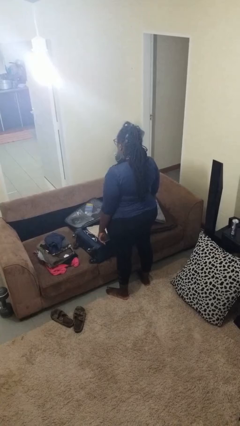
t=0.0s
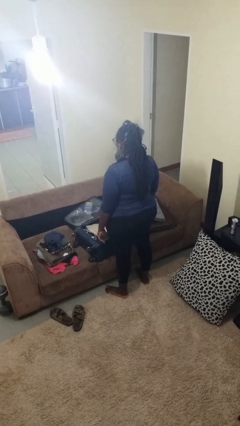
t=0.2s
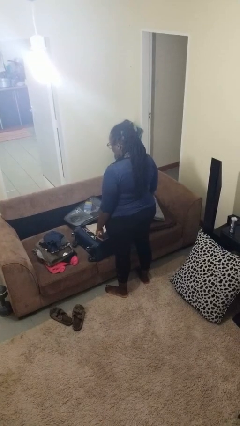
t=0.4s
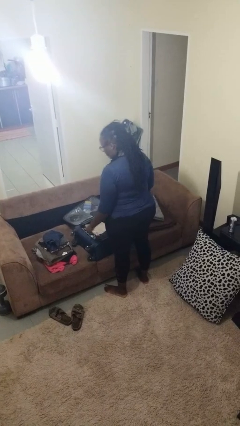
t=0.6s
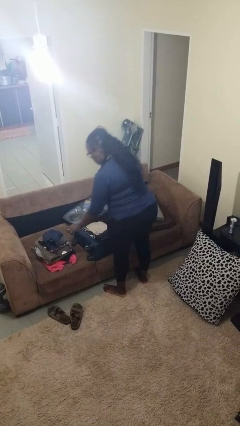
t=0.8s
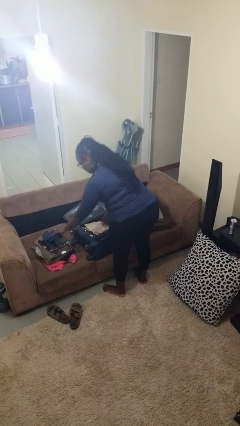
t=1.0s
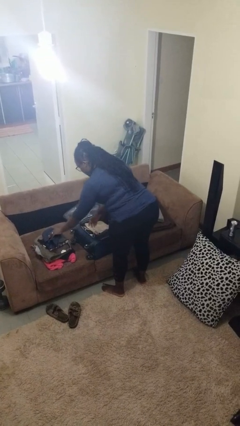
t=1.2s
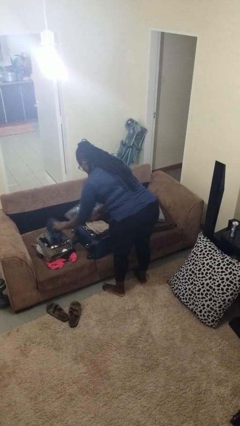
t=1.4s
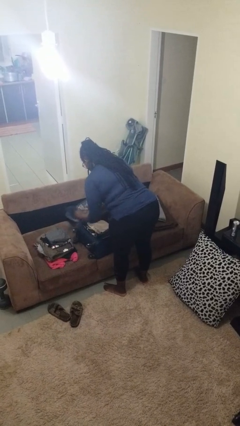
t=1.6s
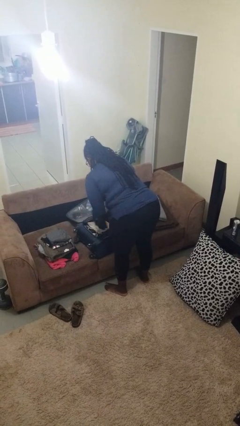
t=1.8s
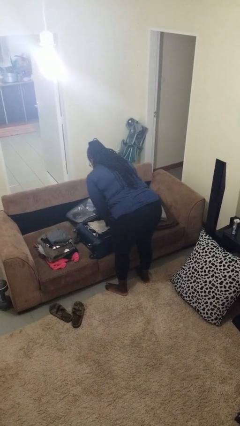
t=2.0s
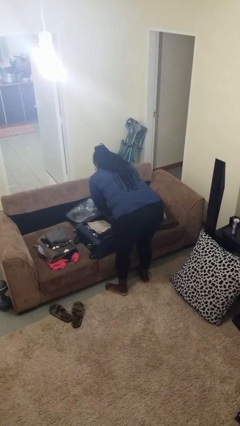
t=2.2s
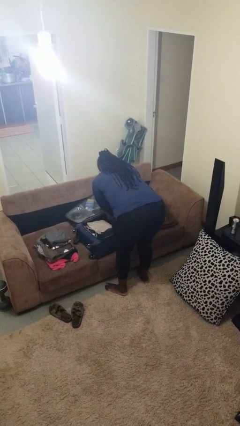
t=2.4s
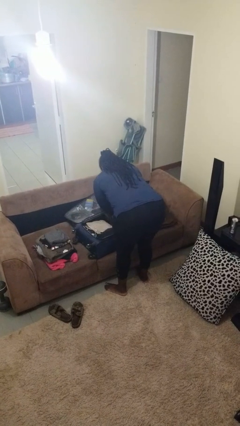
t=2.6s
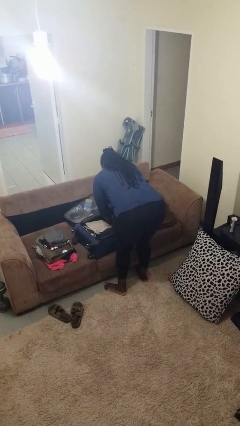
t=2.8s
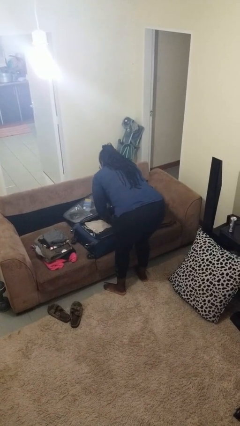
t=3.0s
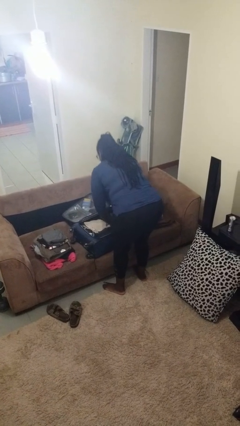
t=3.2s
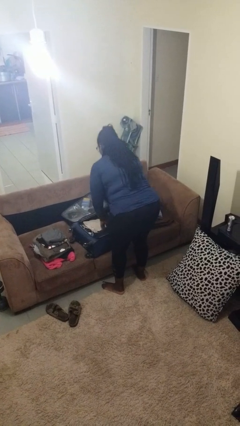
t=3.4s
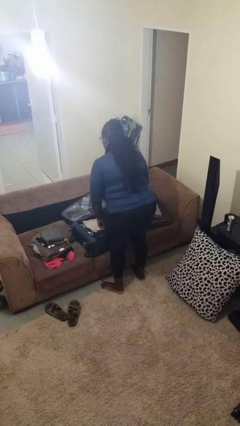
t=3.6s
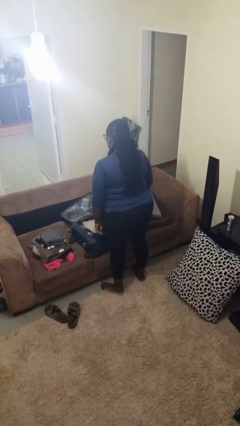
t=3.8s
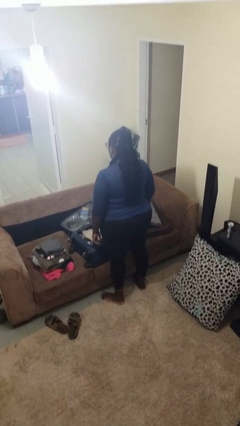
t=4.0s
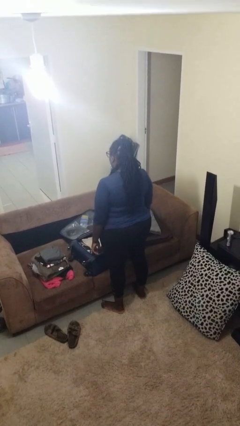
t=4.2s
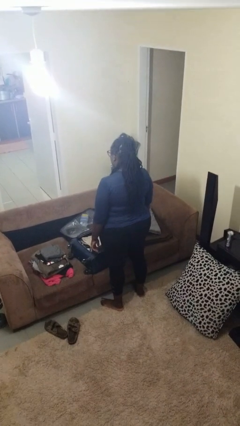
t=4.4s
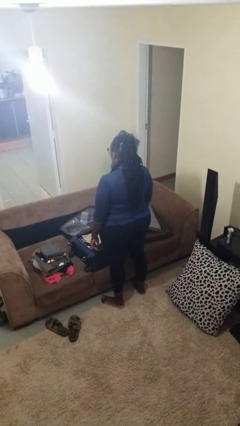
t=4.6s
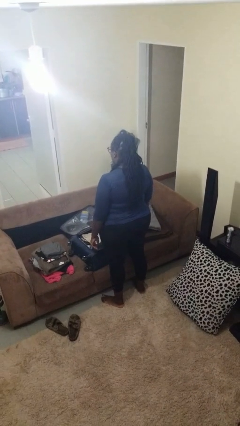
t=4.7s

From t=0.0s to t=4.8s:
person loads clothes into suitcase

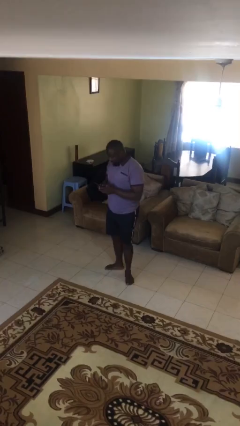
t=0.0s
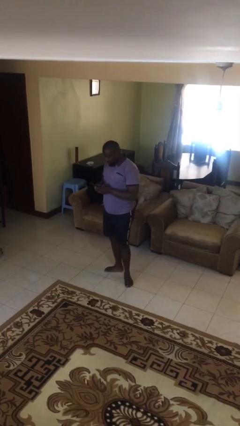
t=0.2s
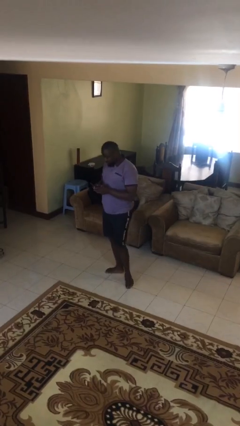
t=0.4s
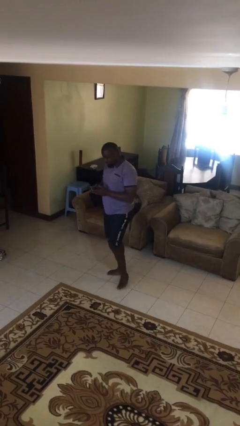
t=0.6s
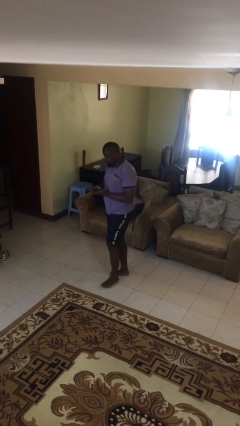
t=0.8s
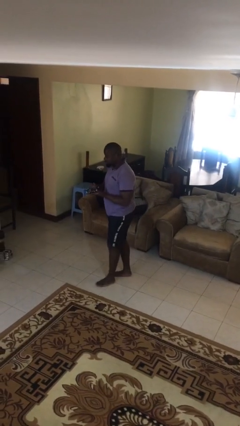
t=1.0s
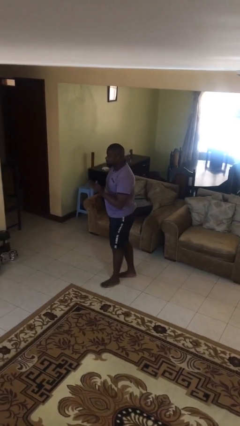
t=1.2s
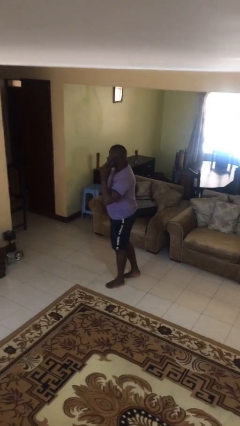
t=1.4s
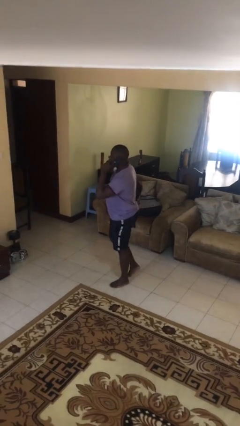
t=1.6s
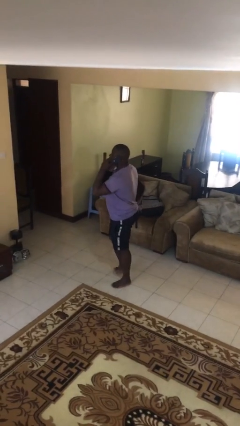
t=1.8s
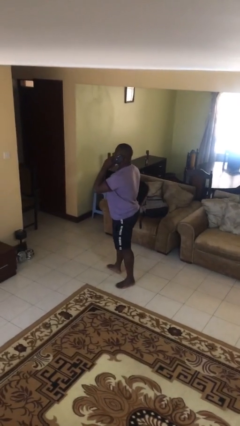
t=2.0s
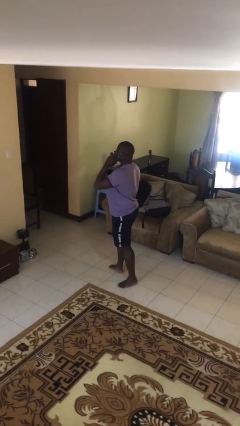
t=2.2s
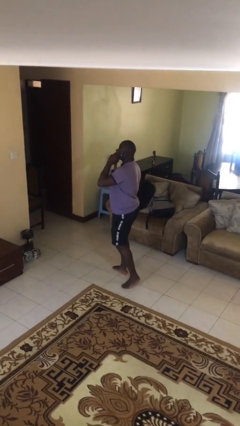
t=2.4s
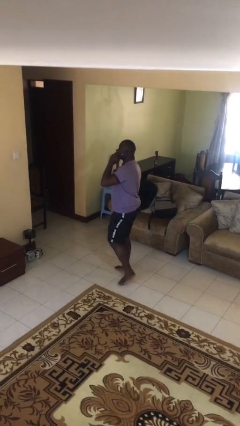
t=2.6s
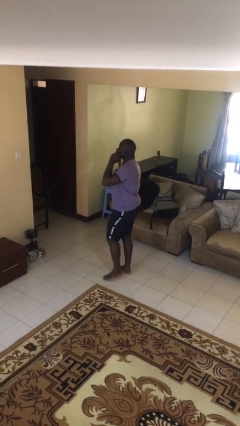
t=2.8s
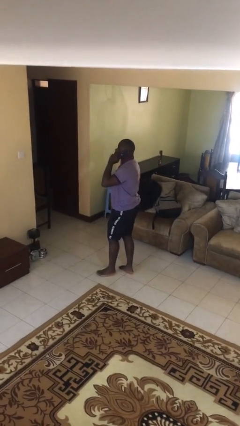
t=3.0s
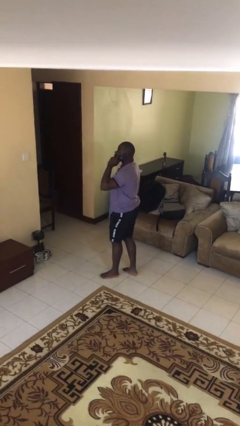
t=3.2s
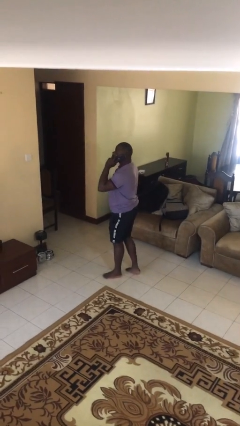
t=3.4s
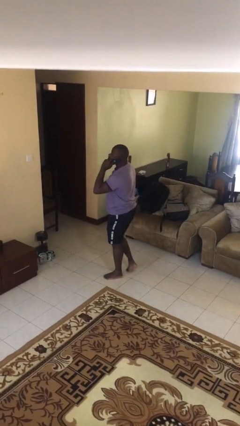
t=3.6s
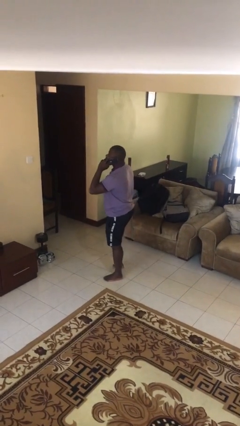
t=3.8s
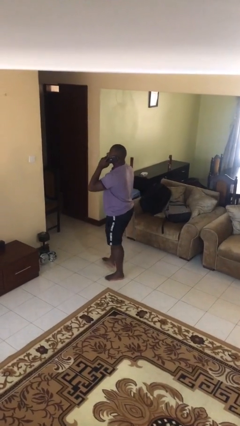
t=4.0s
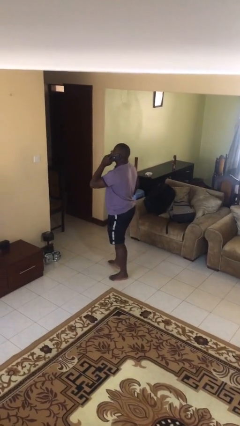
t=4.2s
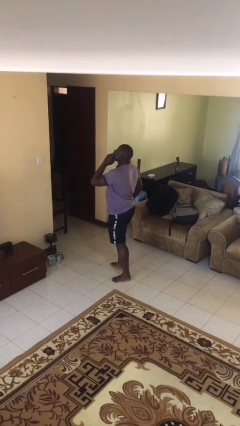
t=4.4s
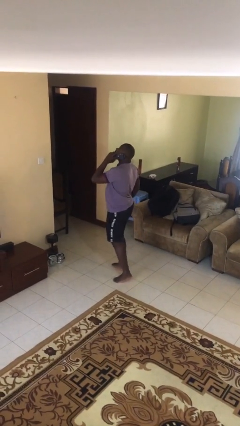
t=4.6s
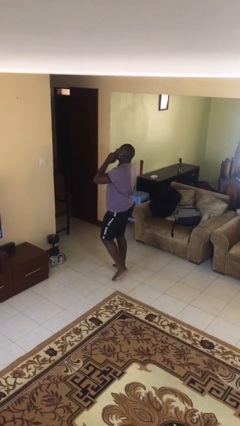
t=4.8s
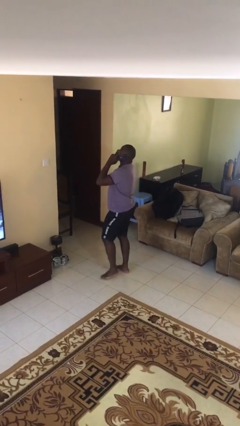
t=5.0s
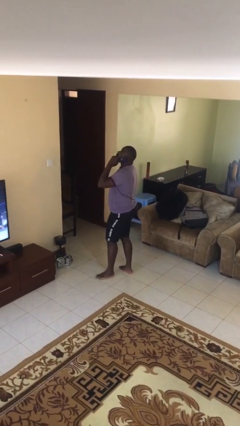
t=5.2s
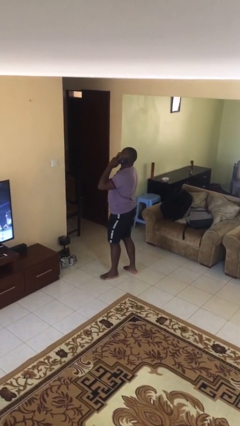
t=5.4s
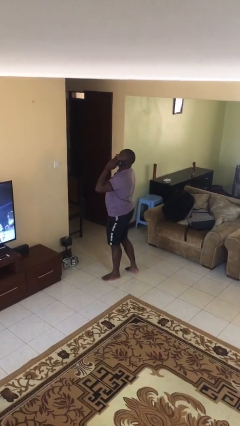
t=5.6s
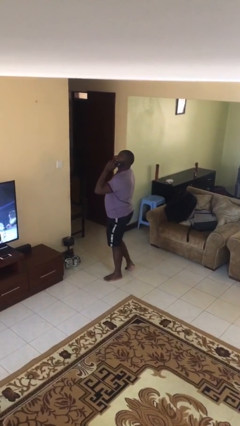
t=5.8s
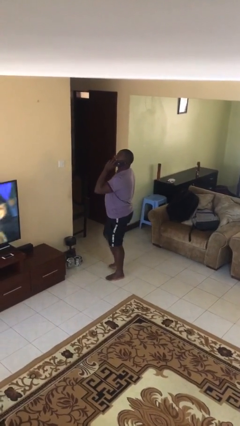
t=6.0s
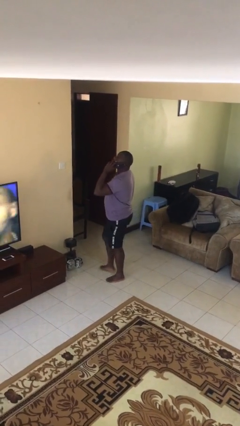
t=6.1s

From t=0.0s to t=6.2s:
person talks on phone

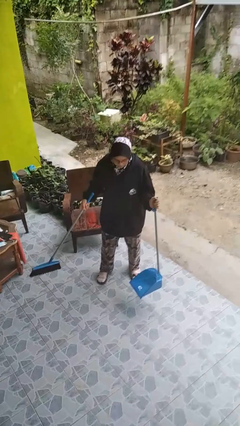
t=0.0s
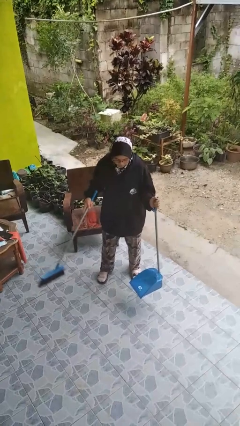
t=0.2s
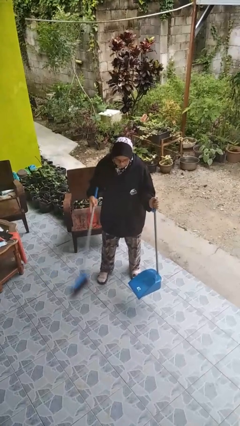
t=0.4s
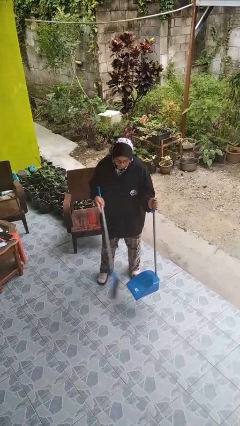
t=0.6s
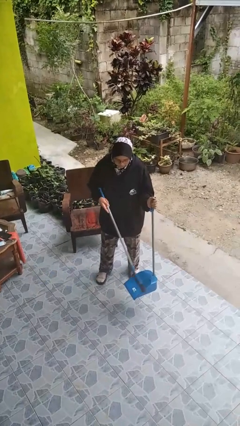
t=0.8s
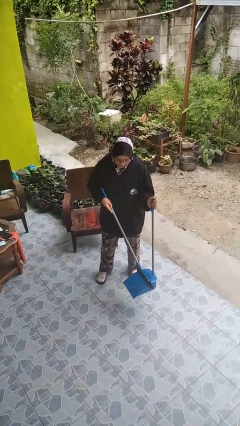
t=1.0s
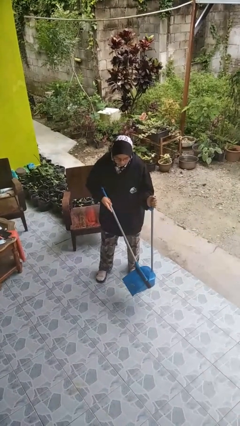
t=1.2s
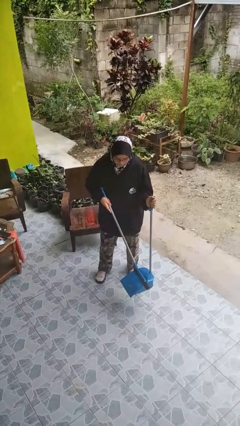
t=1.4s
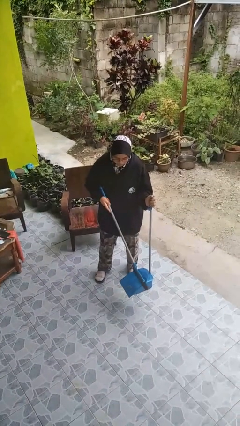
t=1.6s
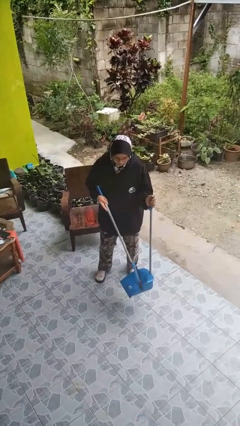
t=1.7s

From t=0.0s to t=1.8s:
person sweeps floor

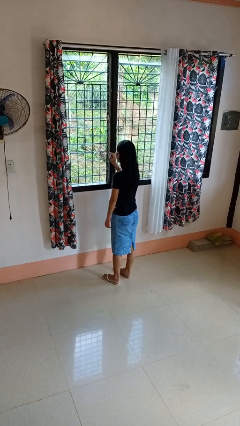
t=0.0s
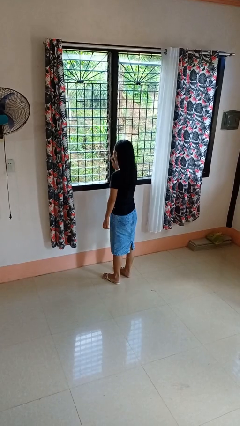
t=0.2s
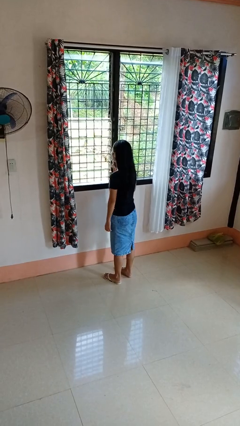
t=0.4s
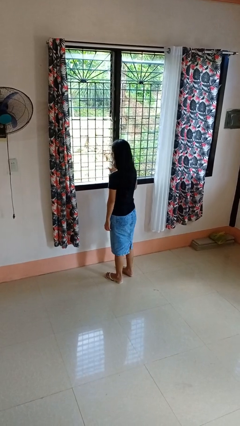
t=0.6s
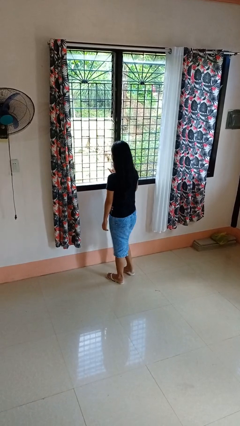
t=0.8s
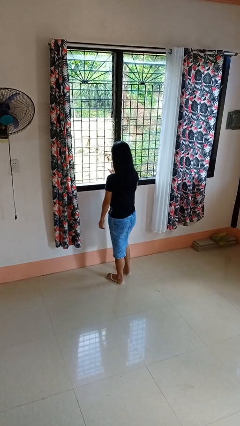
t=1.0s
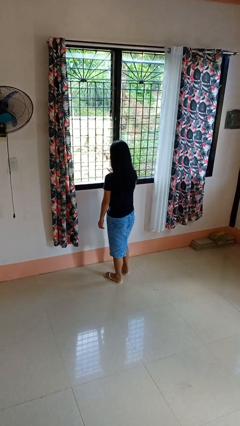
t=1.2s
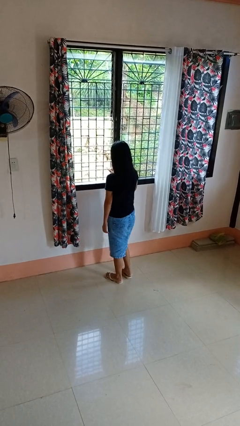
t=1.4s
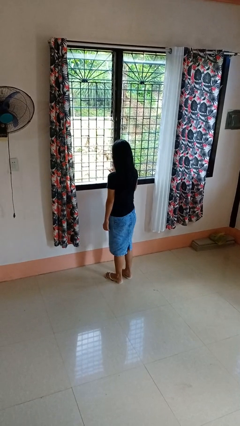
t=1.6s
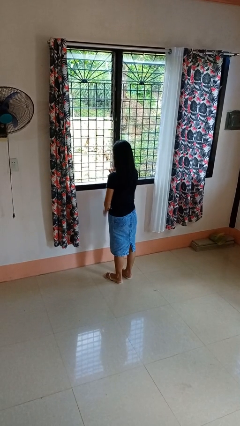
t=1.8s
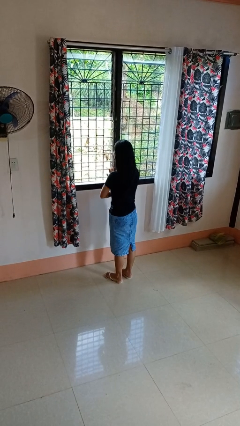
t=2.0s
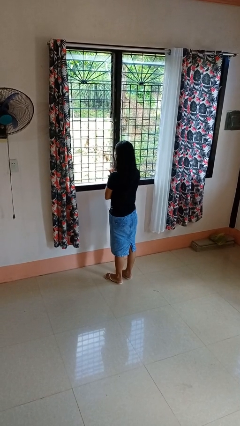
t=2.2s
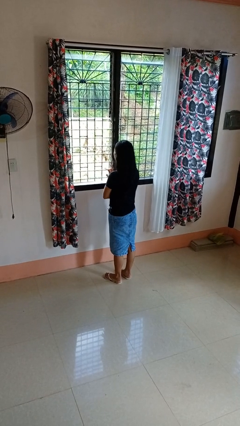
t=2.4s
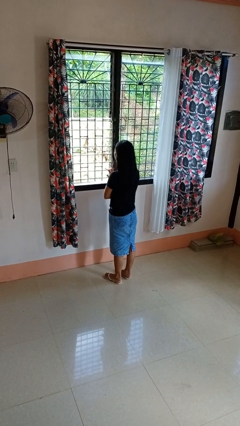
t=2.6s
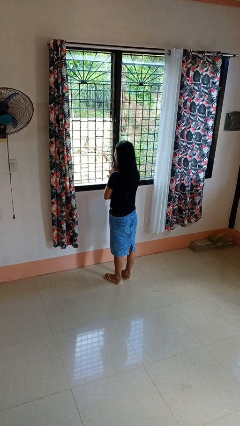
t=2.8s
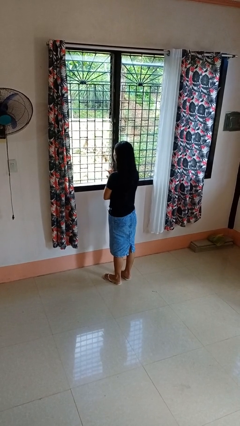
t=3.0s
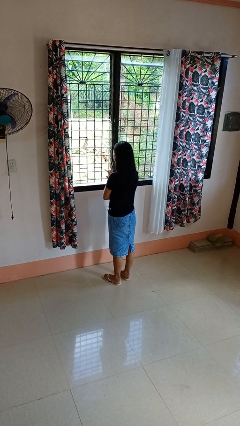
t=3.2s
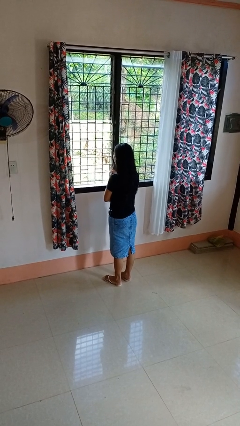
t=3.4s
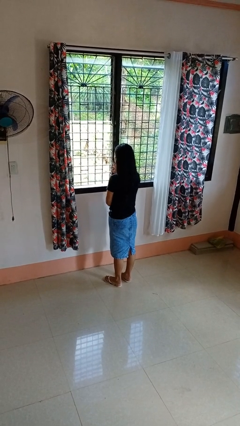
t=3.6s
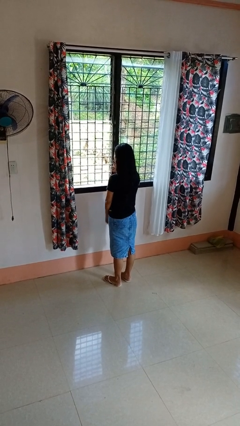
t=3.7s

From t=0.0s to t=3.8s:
person opens home window

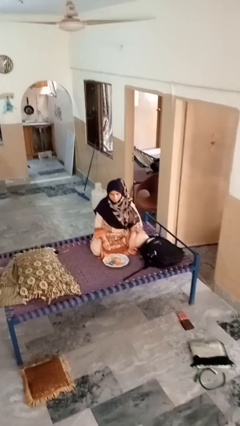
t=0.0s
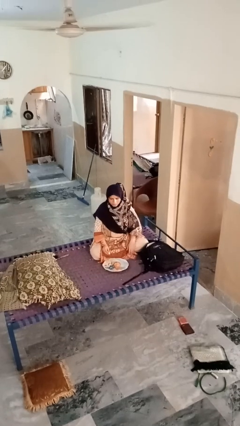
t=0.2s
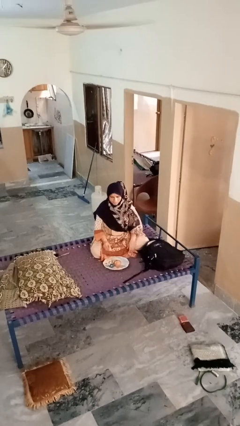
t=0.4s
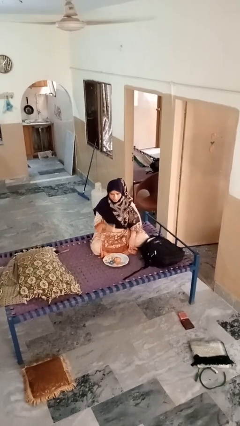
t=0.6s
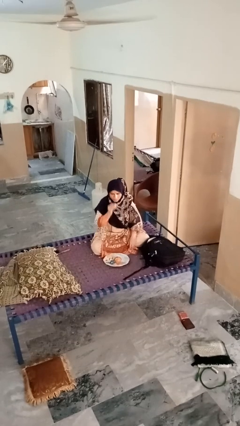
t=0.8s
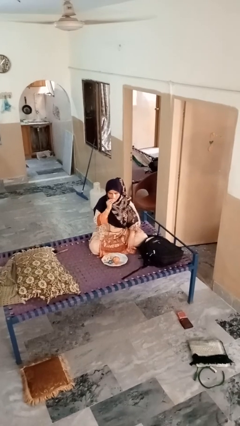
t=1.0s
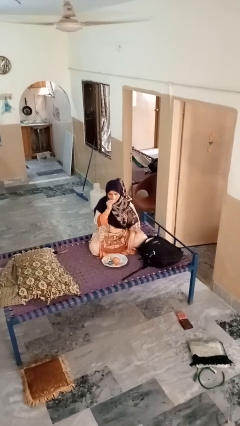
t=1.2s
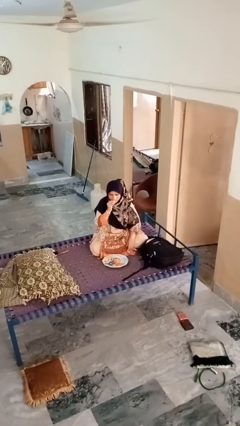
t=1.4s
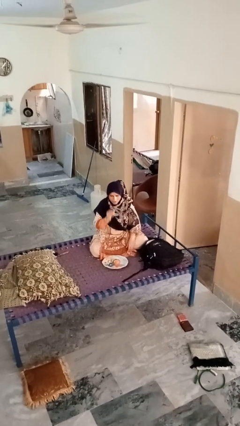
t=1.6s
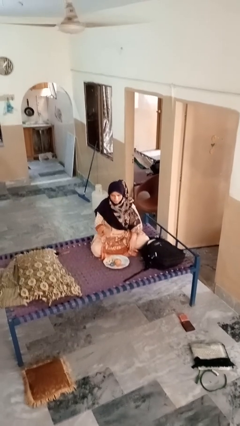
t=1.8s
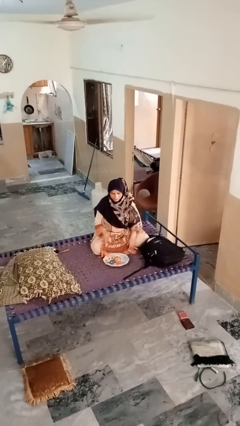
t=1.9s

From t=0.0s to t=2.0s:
person eats apple
